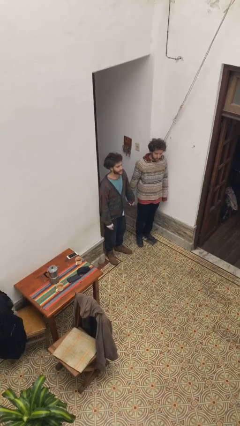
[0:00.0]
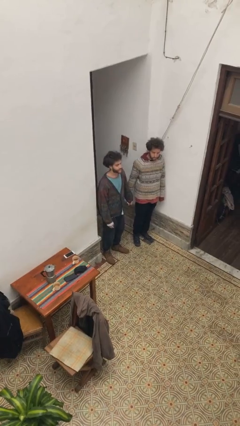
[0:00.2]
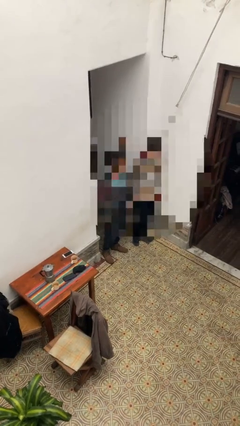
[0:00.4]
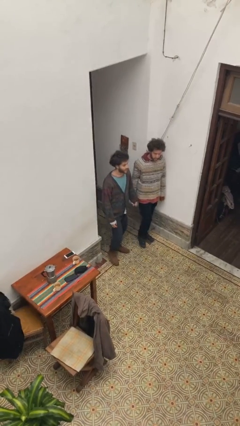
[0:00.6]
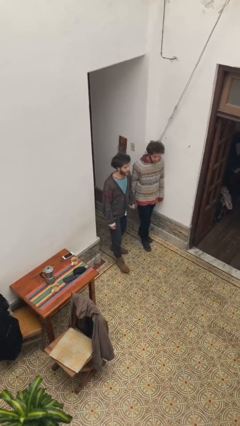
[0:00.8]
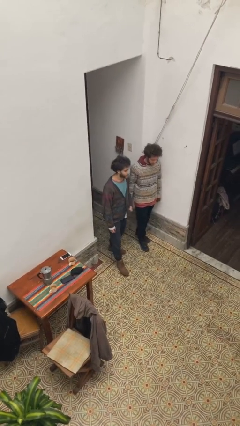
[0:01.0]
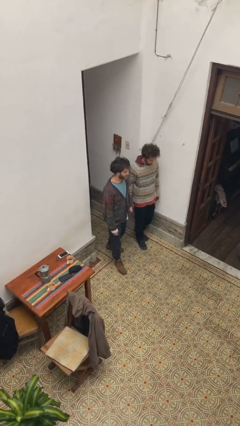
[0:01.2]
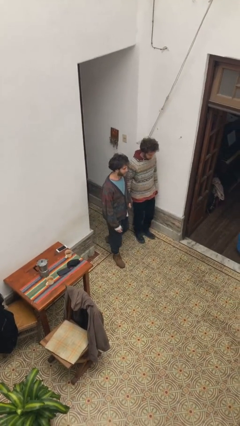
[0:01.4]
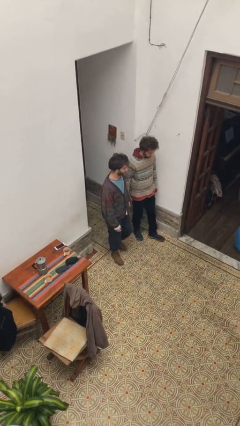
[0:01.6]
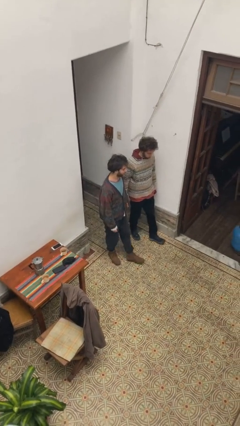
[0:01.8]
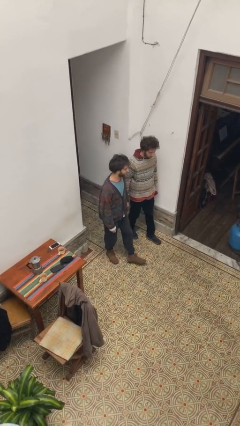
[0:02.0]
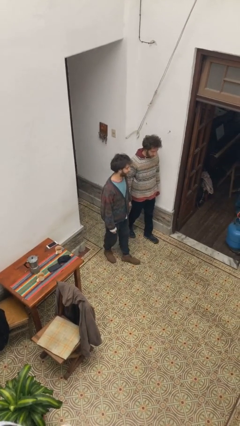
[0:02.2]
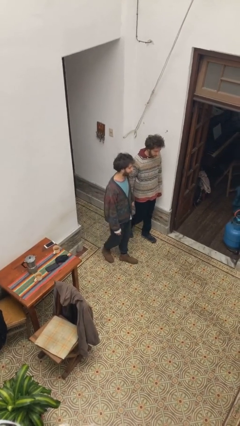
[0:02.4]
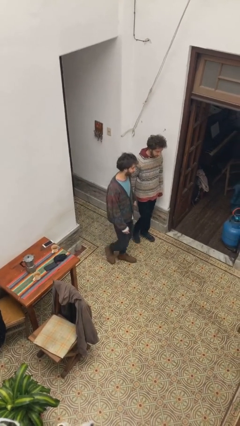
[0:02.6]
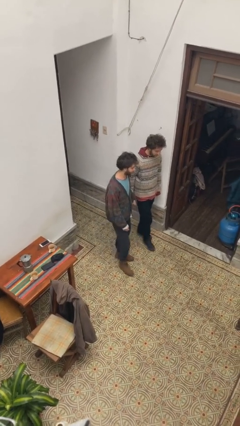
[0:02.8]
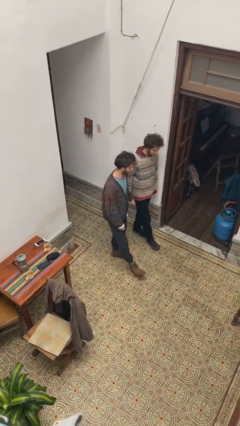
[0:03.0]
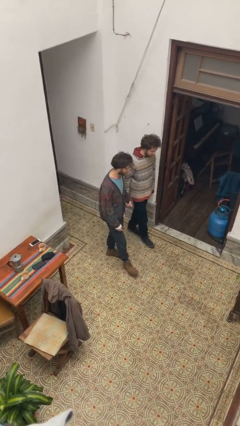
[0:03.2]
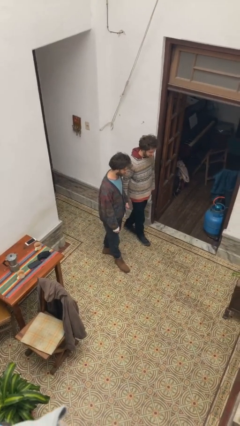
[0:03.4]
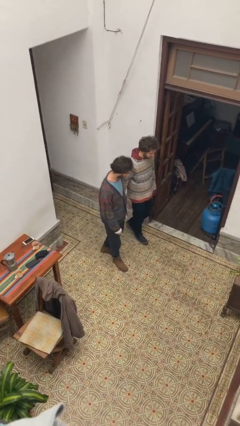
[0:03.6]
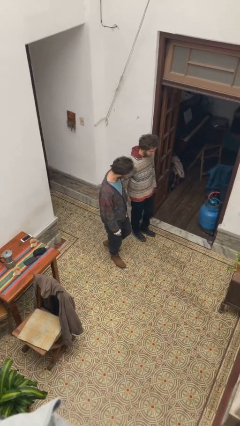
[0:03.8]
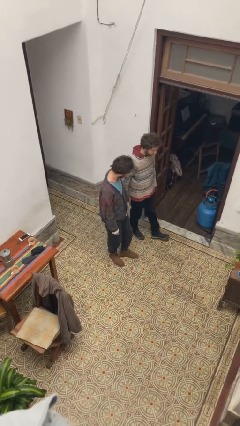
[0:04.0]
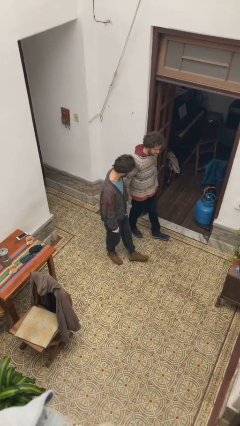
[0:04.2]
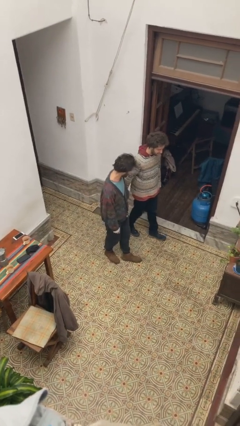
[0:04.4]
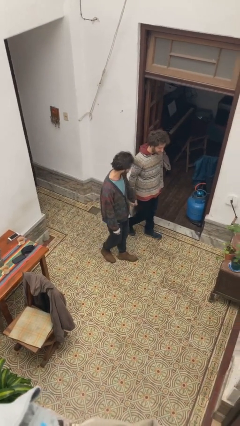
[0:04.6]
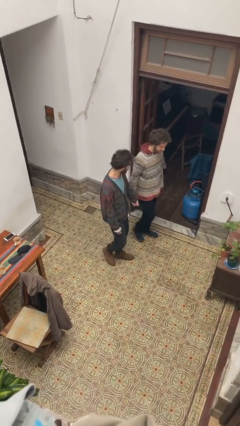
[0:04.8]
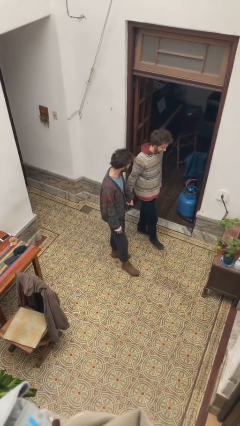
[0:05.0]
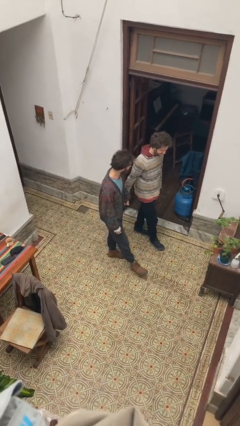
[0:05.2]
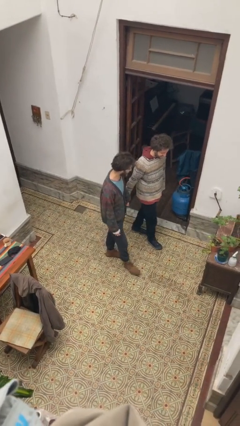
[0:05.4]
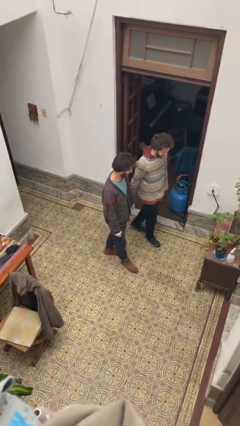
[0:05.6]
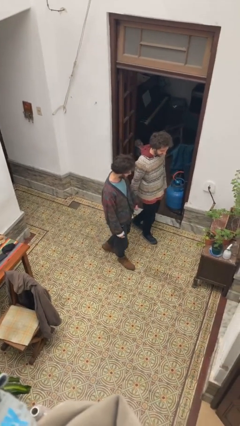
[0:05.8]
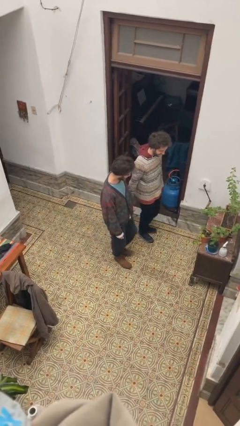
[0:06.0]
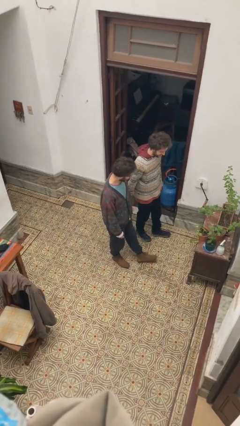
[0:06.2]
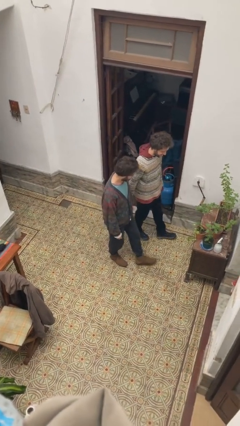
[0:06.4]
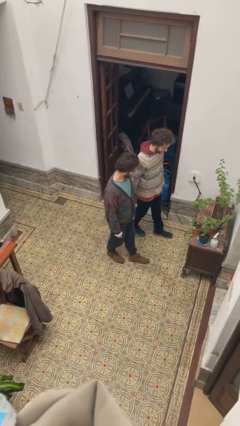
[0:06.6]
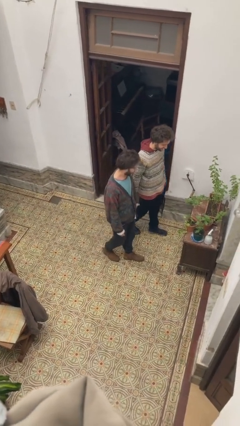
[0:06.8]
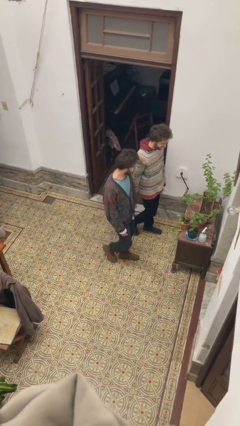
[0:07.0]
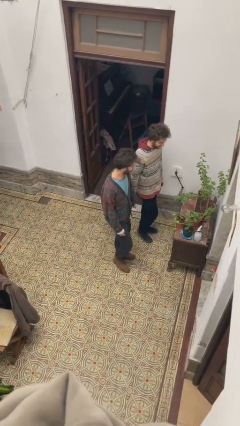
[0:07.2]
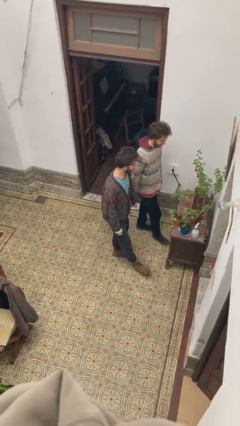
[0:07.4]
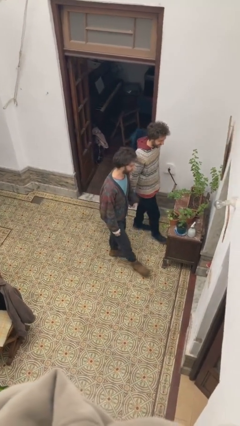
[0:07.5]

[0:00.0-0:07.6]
person holds hand

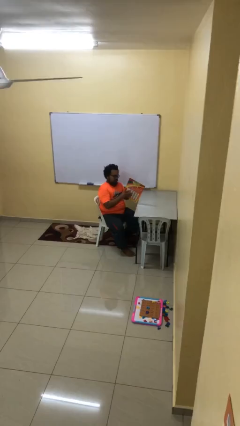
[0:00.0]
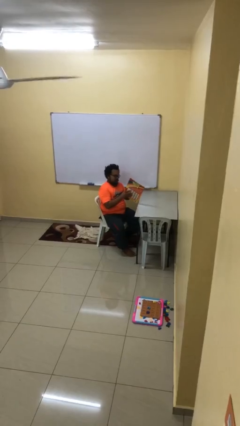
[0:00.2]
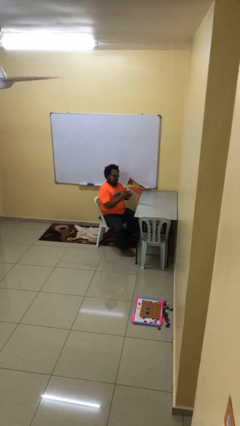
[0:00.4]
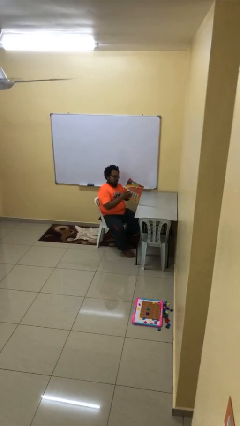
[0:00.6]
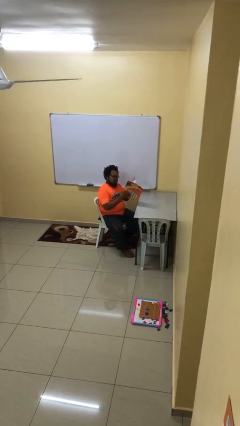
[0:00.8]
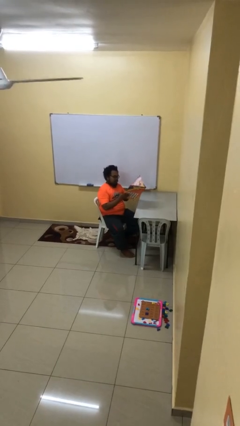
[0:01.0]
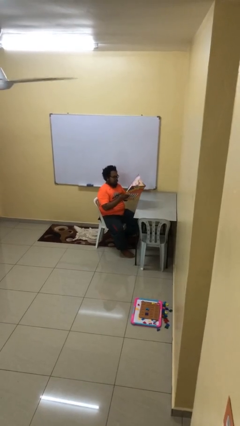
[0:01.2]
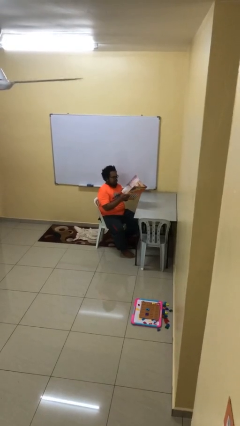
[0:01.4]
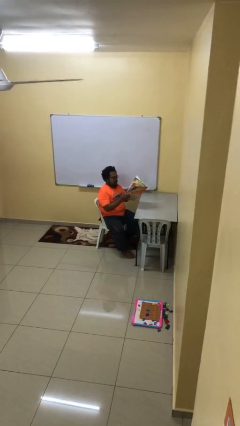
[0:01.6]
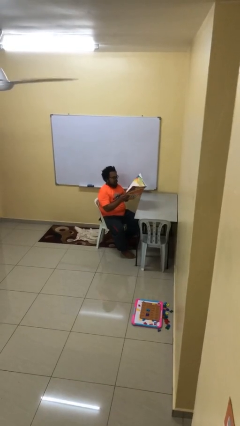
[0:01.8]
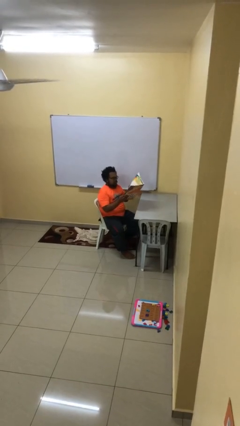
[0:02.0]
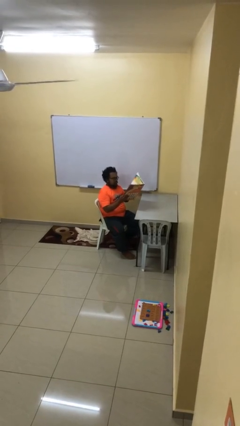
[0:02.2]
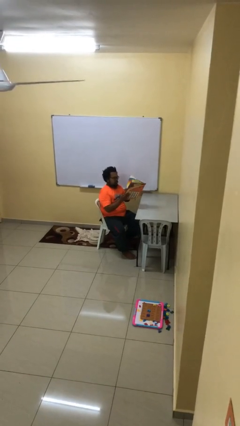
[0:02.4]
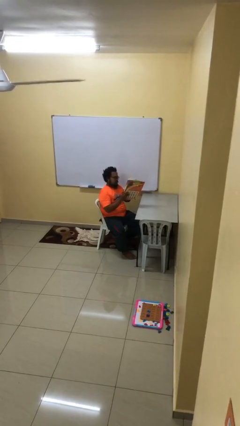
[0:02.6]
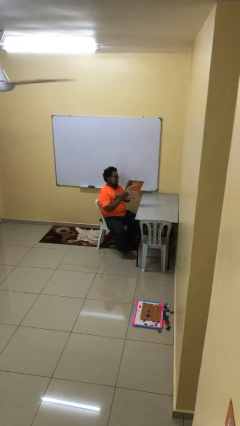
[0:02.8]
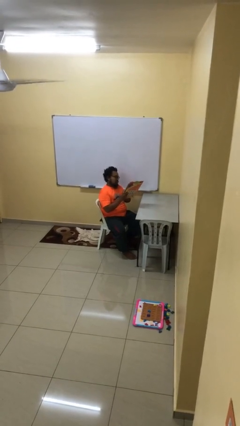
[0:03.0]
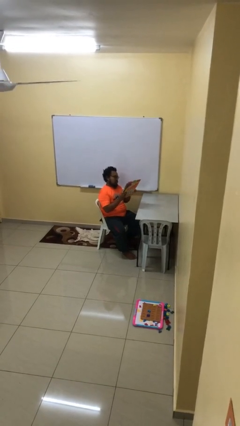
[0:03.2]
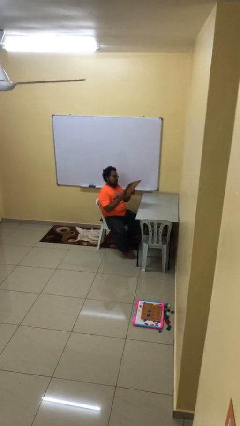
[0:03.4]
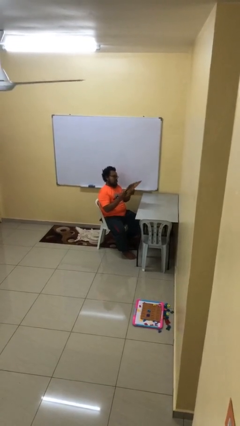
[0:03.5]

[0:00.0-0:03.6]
person reads document

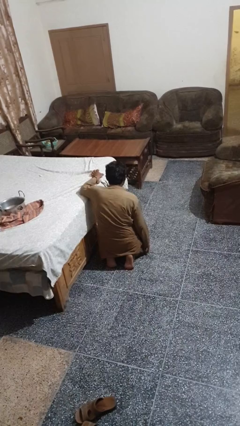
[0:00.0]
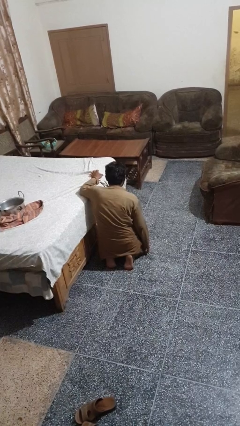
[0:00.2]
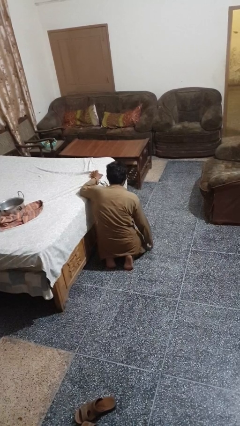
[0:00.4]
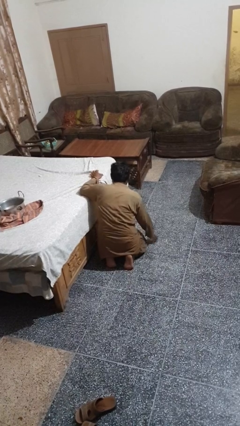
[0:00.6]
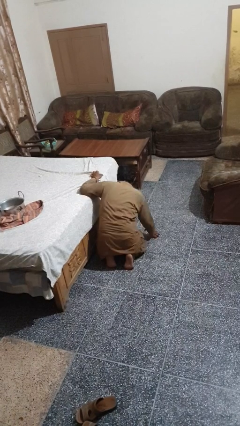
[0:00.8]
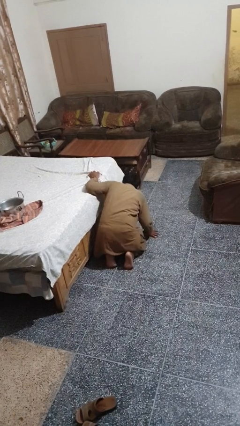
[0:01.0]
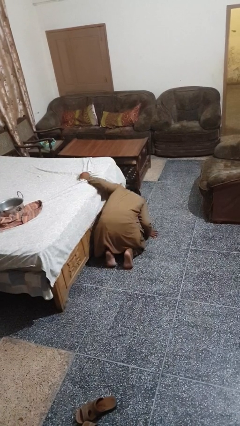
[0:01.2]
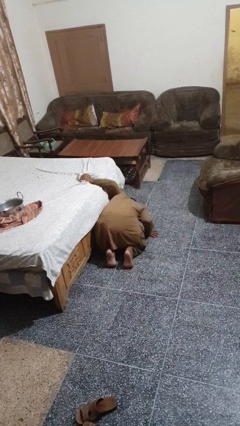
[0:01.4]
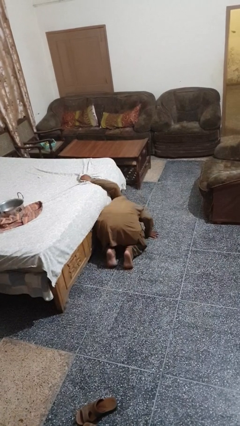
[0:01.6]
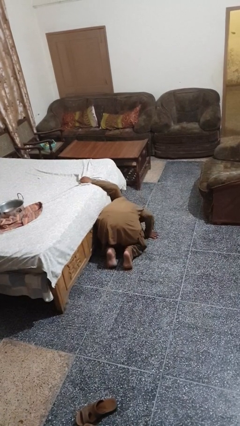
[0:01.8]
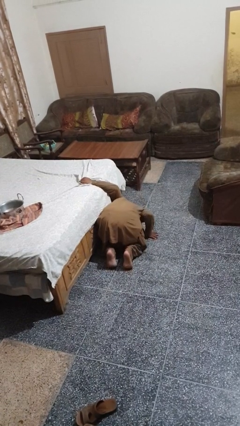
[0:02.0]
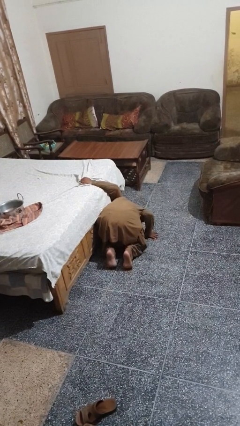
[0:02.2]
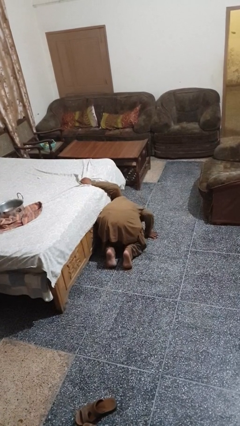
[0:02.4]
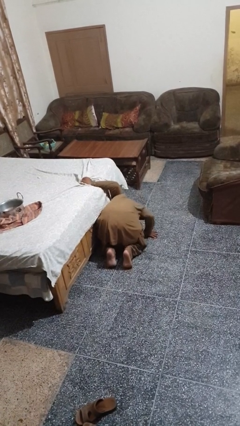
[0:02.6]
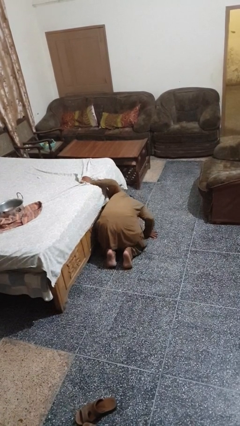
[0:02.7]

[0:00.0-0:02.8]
person searches under bed

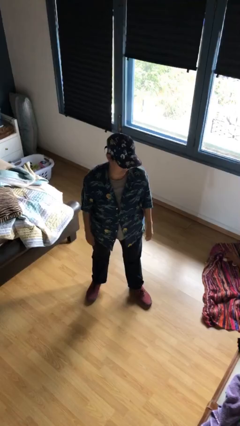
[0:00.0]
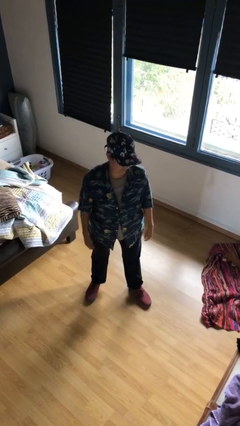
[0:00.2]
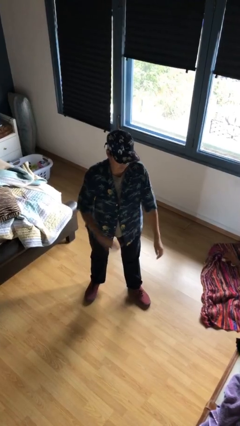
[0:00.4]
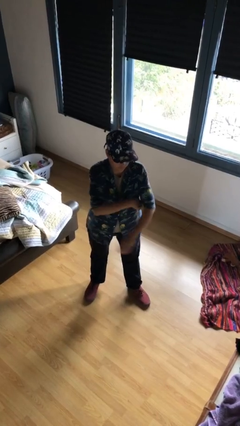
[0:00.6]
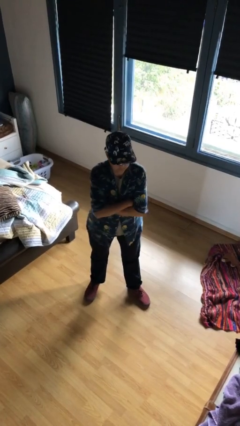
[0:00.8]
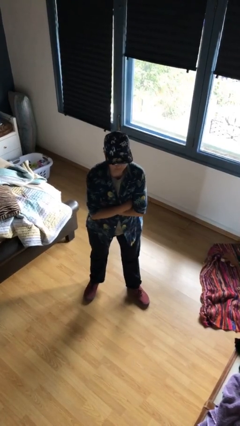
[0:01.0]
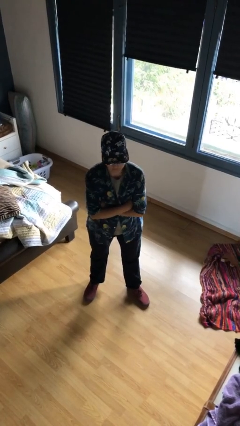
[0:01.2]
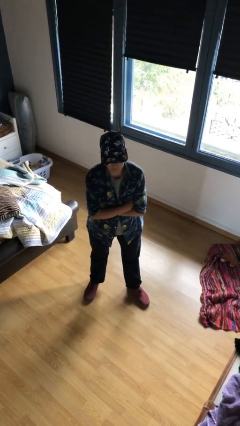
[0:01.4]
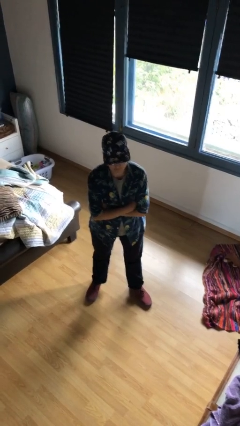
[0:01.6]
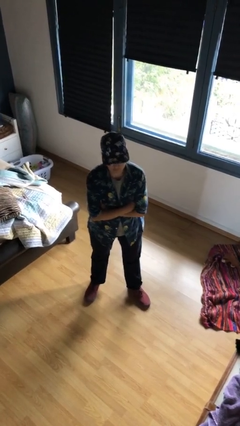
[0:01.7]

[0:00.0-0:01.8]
person crosses arms

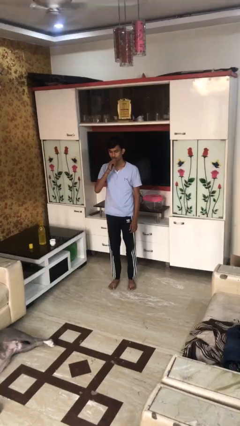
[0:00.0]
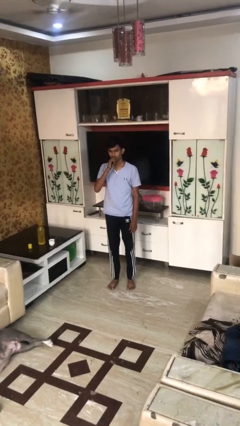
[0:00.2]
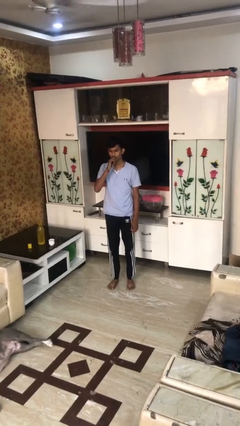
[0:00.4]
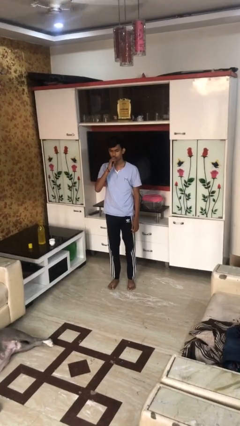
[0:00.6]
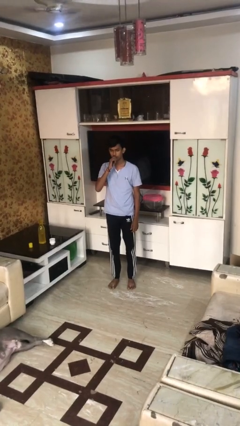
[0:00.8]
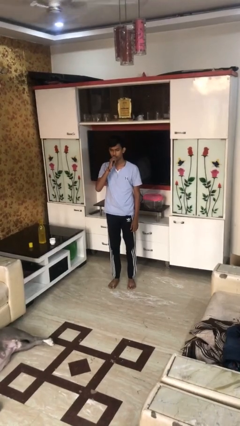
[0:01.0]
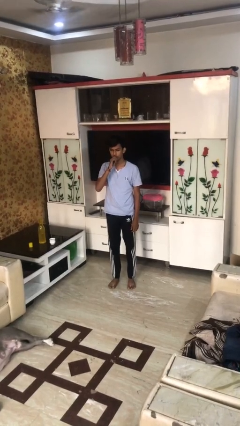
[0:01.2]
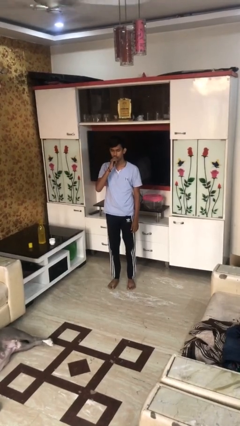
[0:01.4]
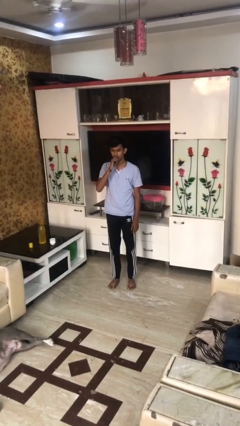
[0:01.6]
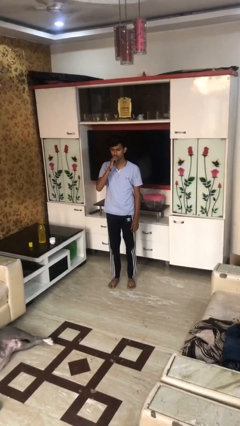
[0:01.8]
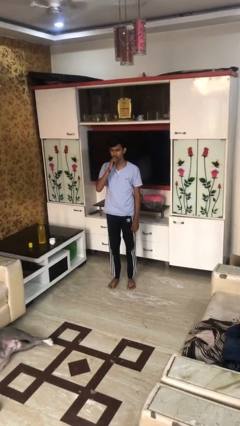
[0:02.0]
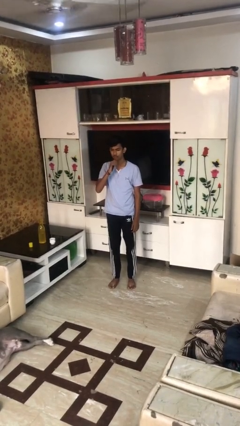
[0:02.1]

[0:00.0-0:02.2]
person vapes
